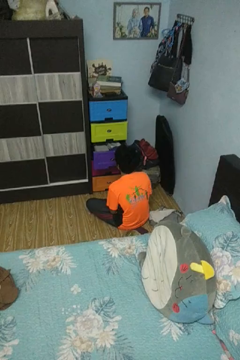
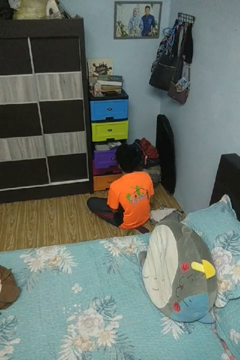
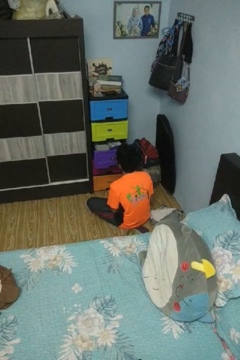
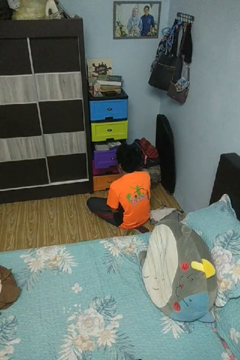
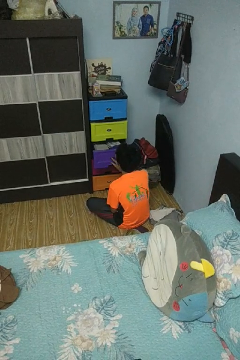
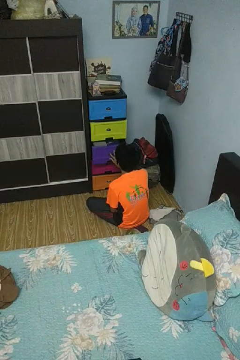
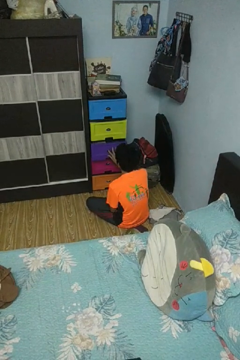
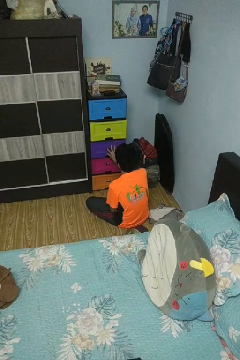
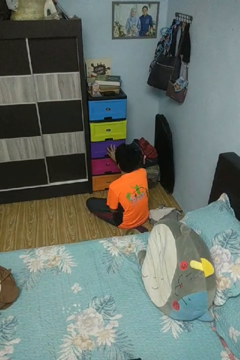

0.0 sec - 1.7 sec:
person closes dresser drawer

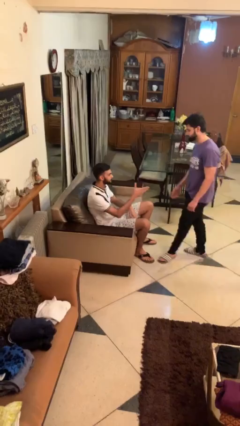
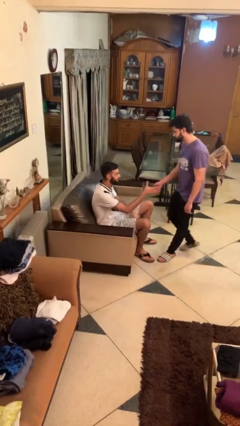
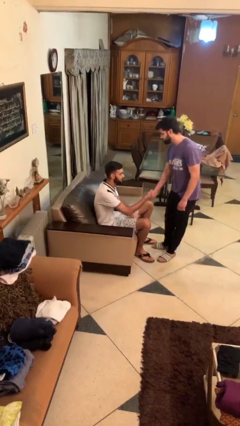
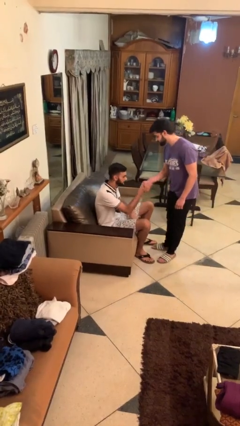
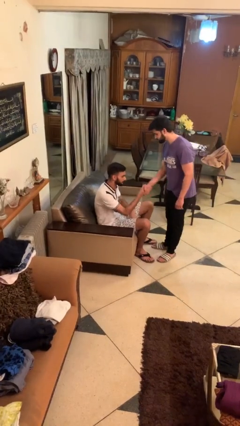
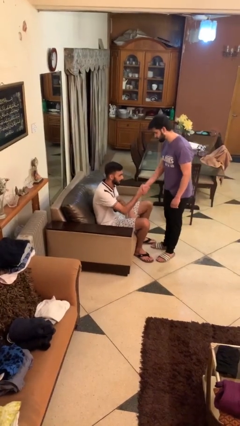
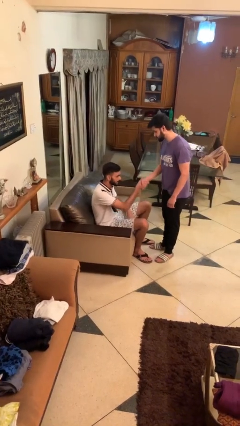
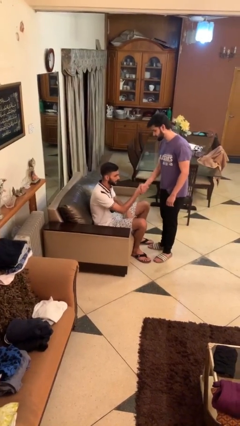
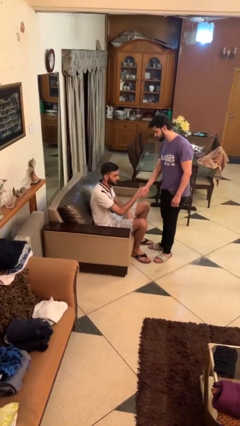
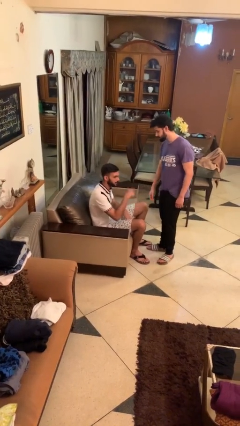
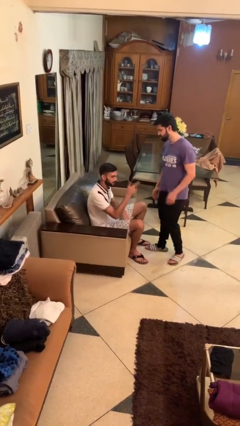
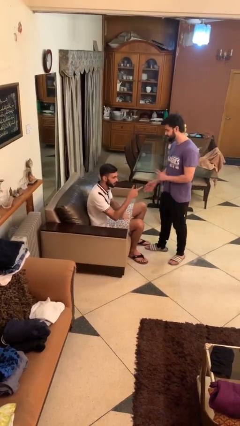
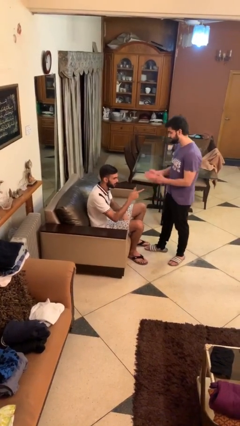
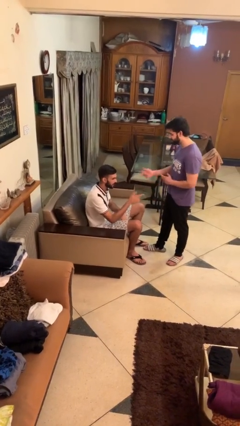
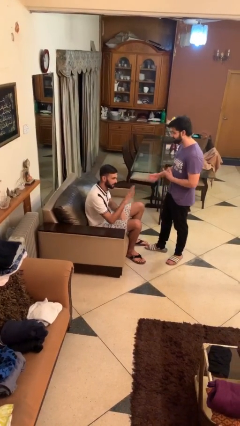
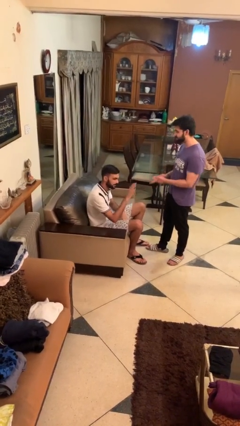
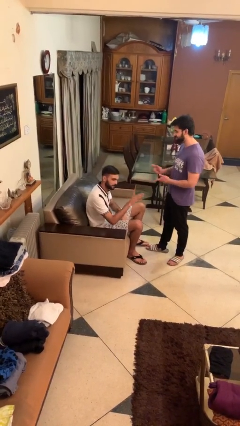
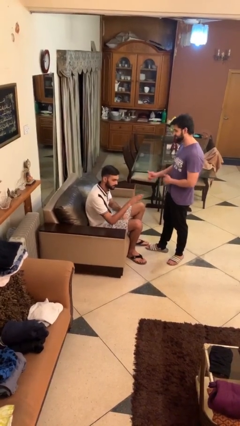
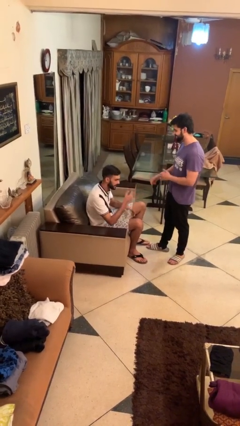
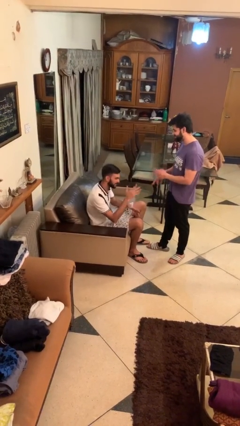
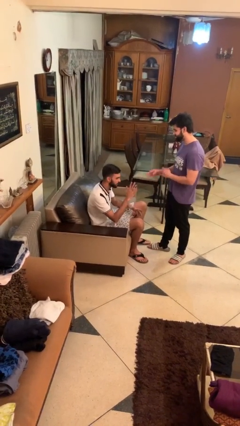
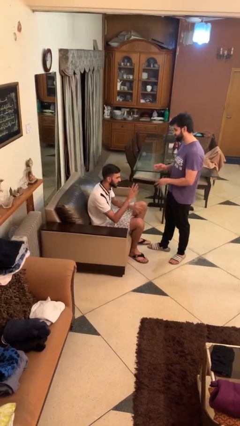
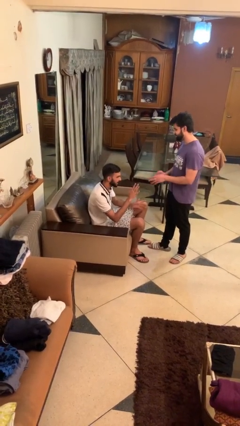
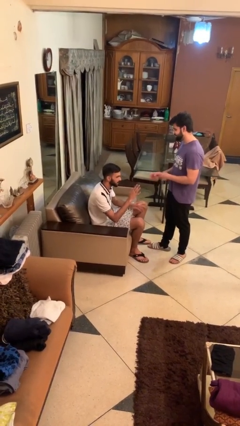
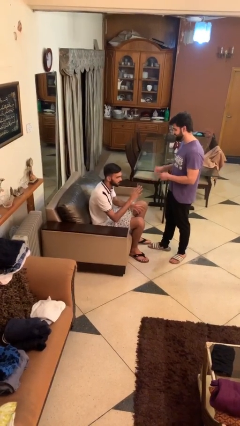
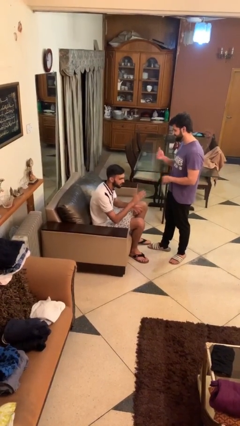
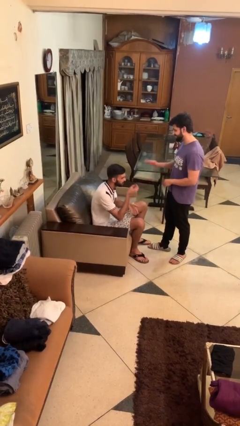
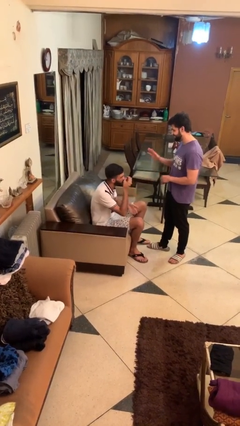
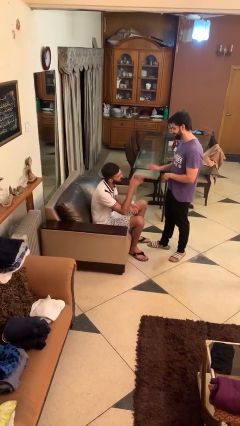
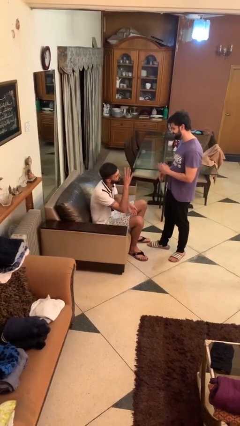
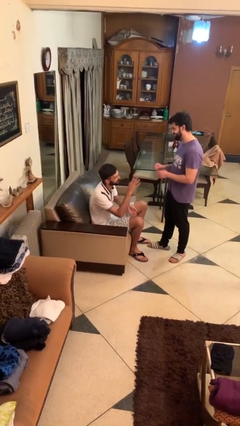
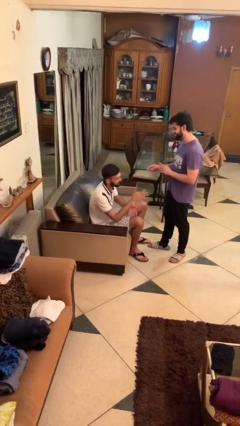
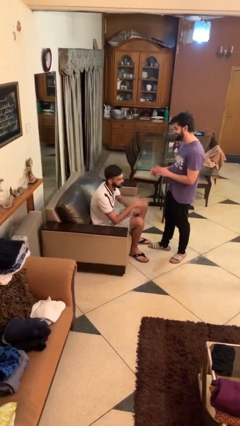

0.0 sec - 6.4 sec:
person shakes hand

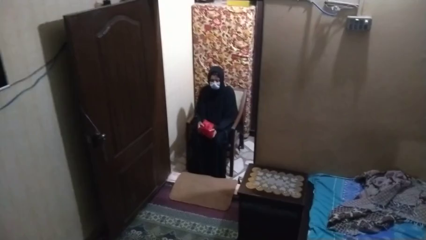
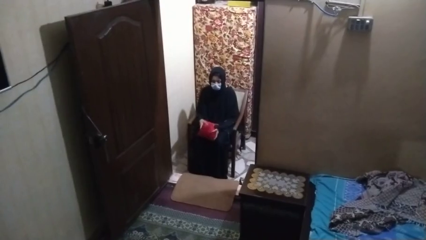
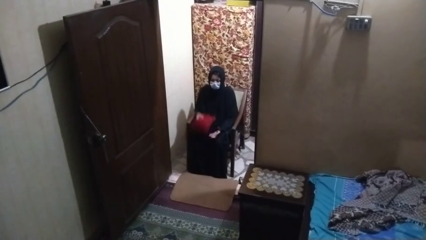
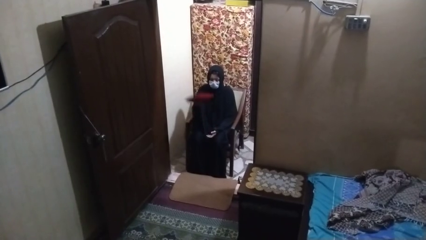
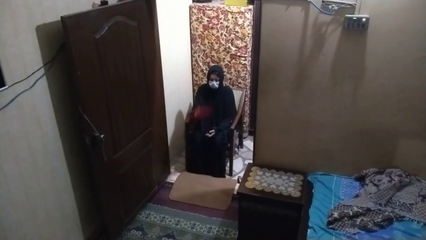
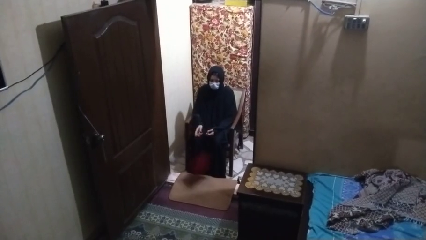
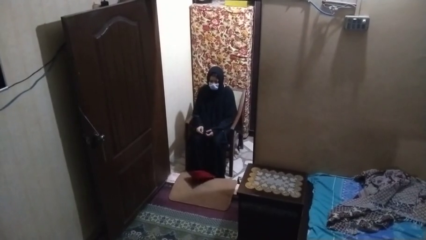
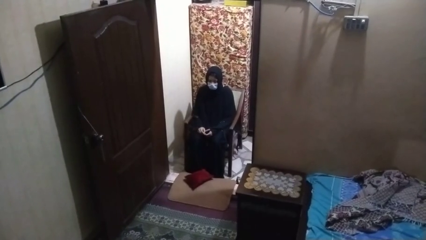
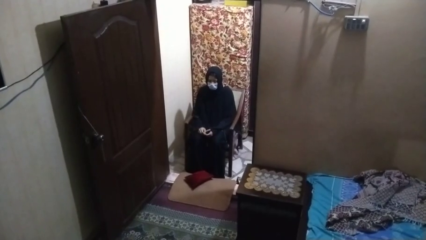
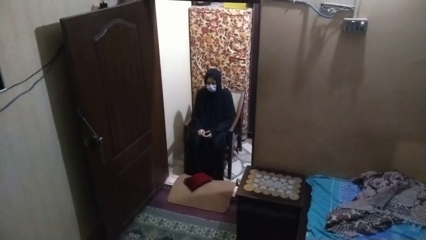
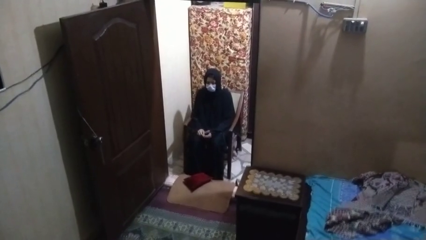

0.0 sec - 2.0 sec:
person throws object into air

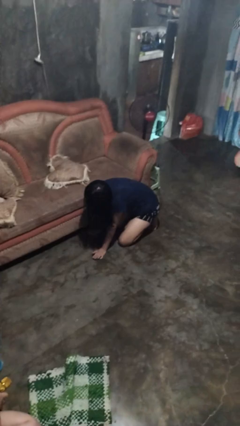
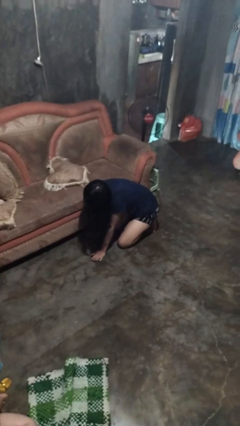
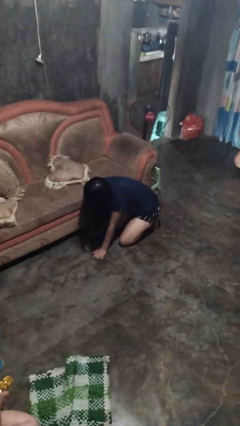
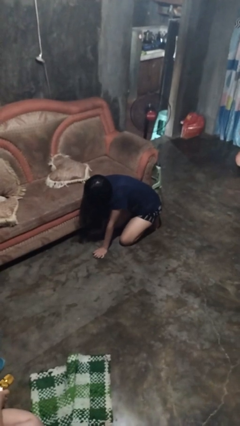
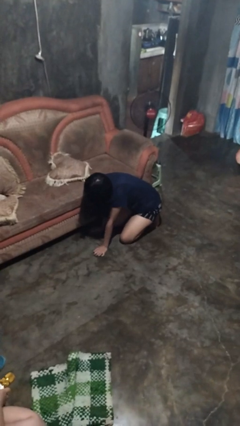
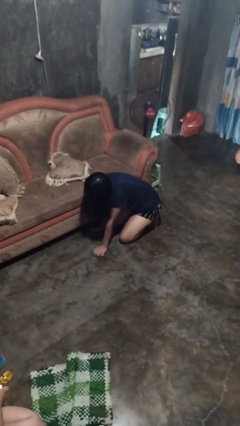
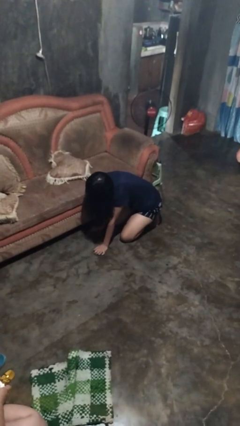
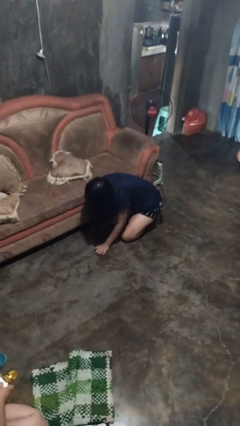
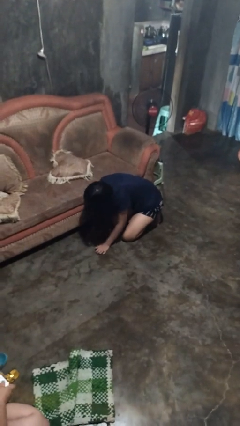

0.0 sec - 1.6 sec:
person searches under couch

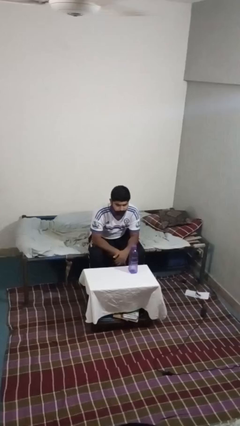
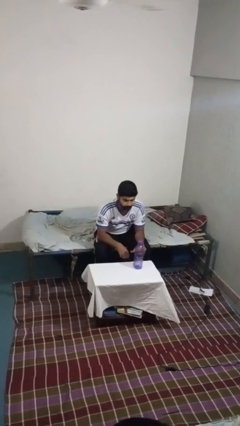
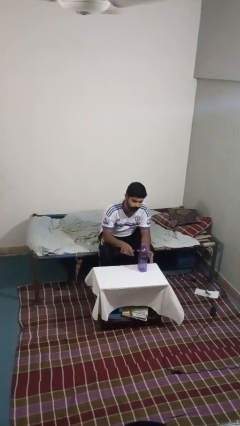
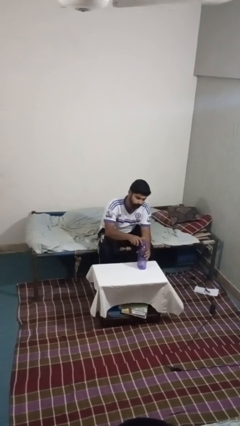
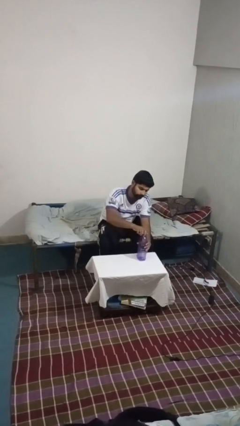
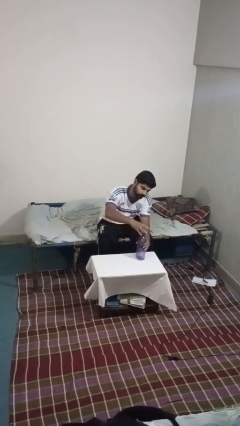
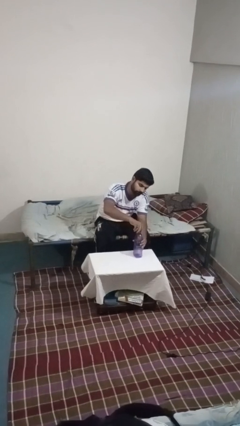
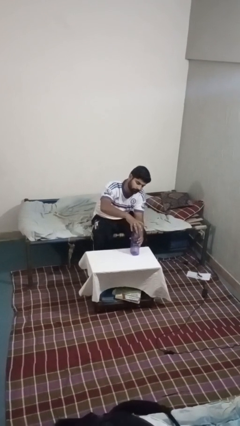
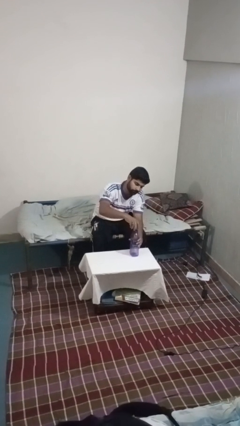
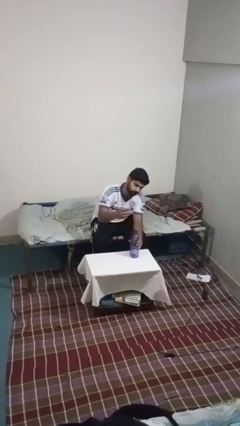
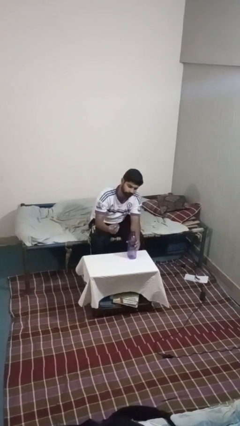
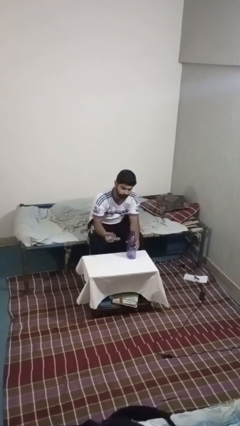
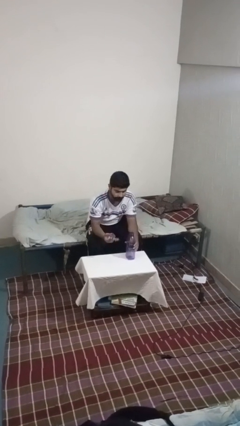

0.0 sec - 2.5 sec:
person unscrews lid from bottle

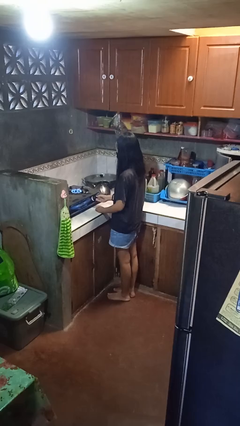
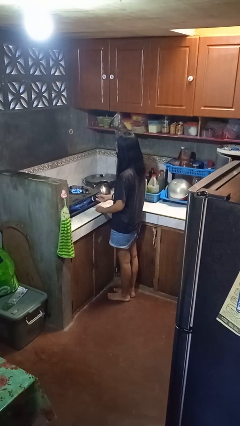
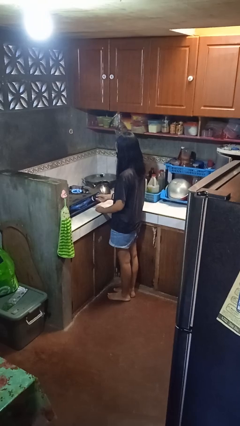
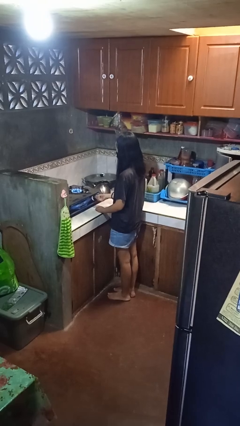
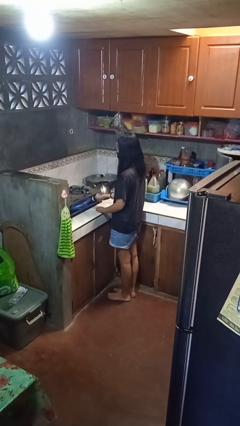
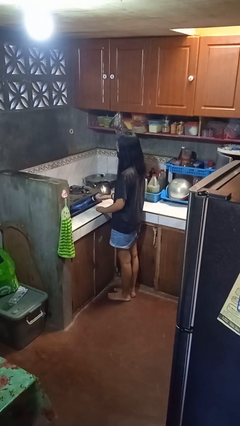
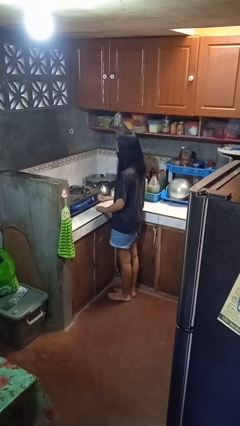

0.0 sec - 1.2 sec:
person turns off stovetop

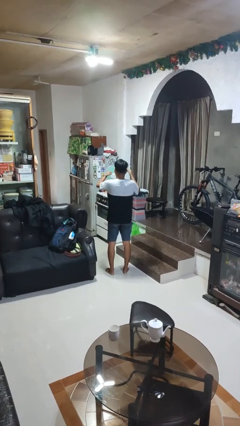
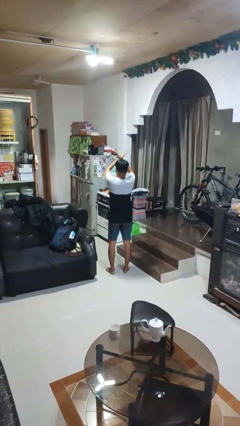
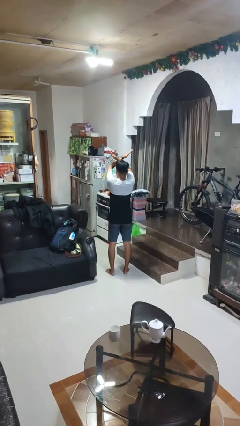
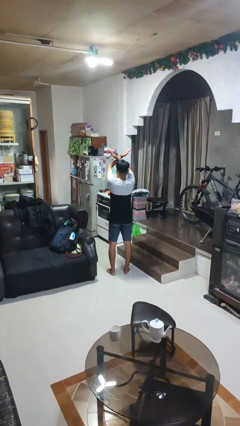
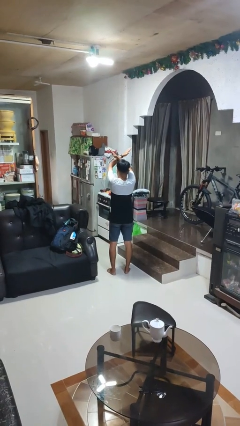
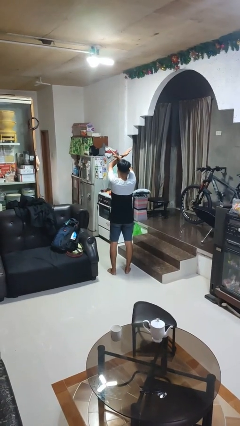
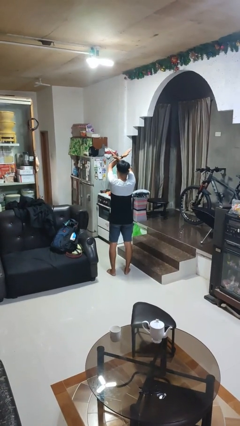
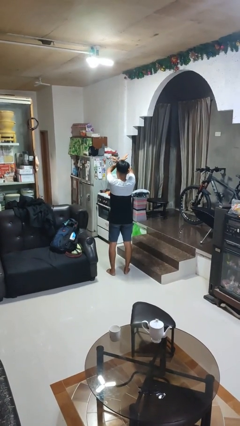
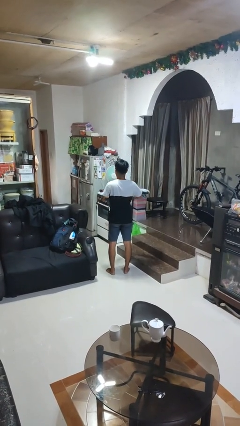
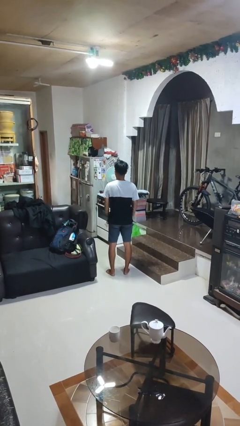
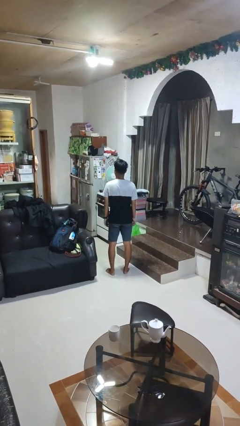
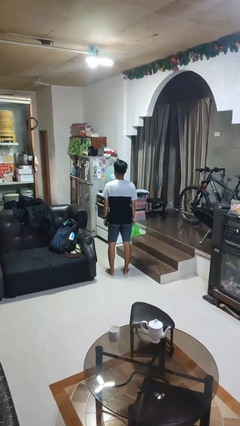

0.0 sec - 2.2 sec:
person gestures arms x
